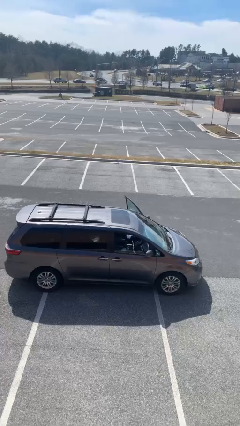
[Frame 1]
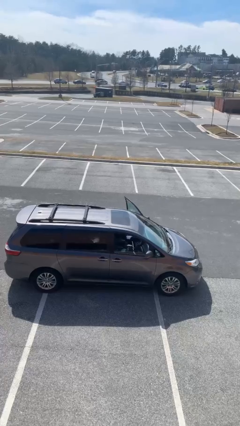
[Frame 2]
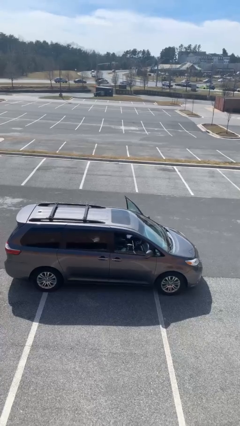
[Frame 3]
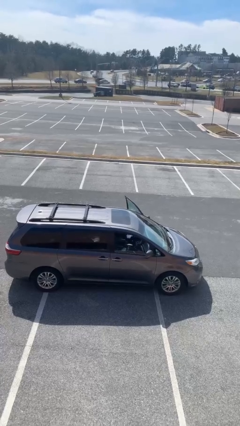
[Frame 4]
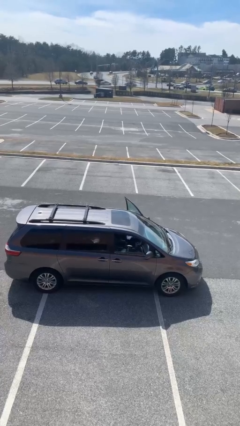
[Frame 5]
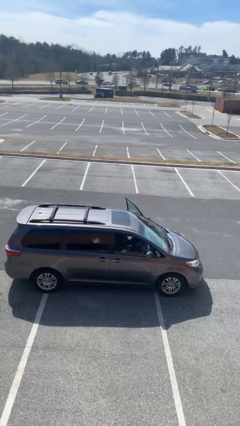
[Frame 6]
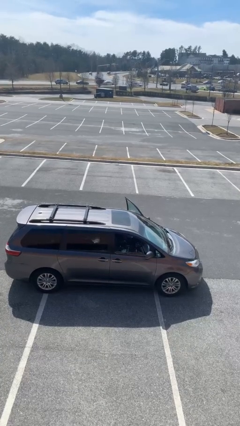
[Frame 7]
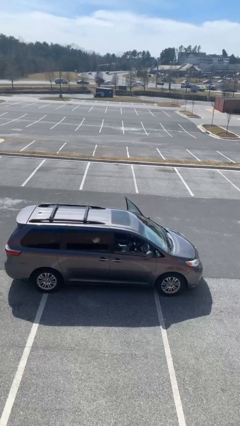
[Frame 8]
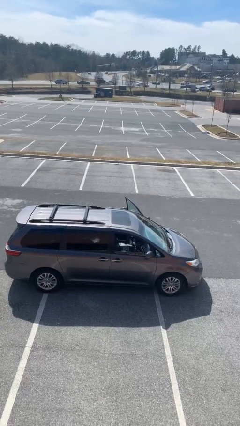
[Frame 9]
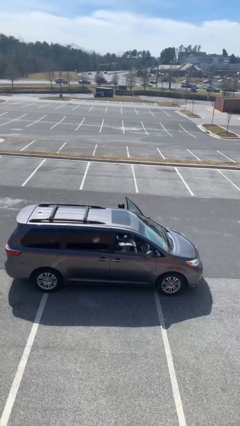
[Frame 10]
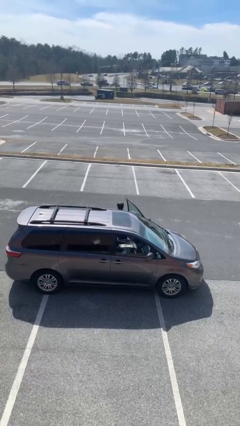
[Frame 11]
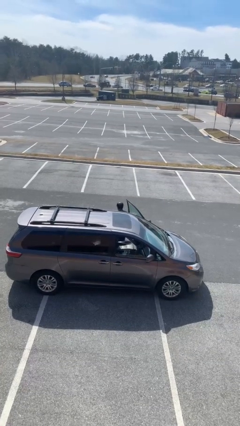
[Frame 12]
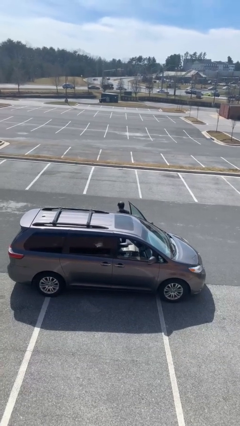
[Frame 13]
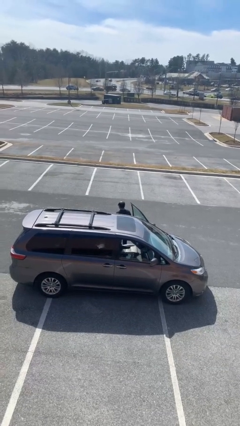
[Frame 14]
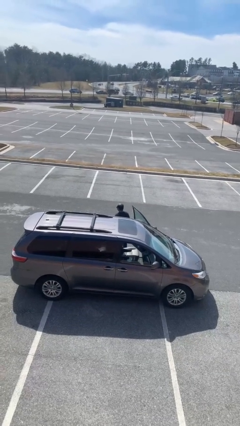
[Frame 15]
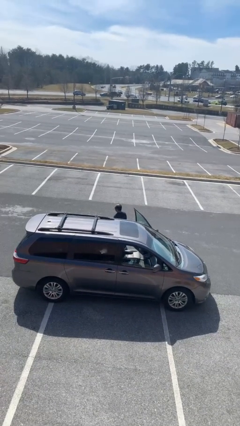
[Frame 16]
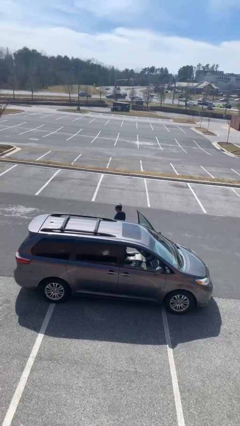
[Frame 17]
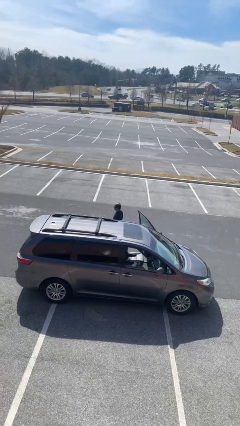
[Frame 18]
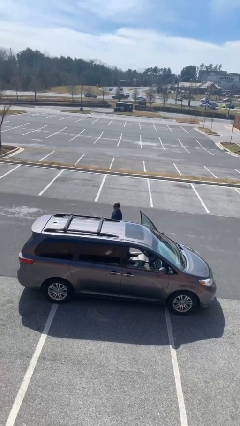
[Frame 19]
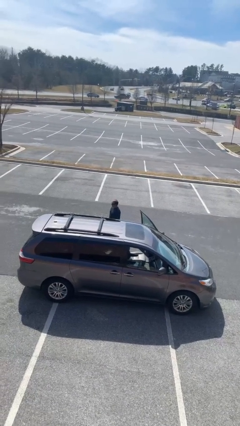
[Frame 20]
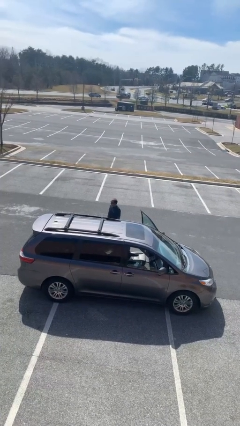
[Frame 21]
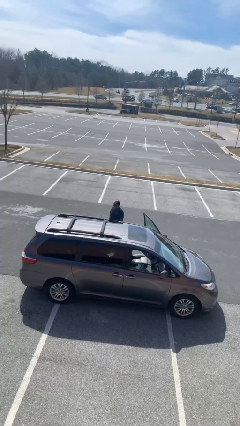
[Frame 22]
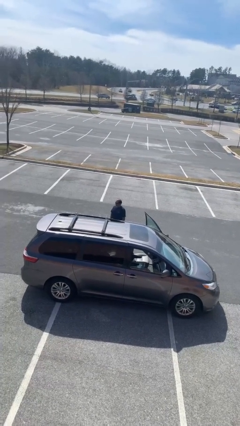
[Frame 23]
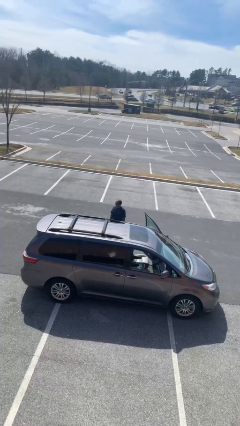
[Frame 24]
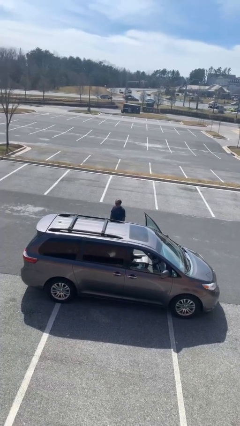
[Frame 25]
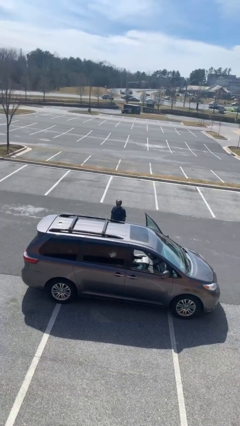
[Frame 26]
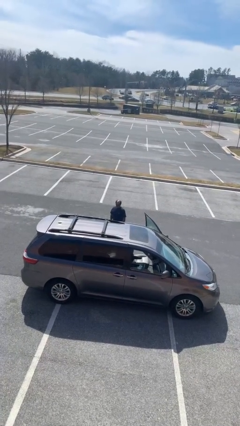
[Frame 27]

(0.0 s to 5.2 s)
person exits car

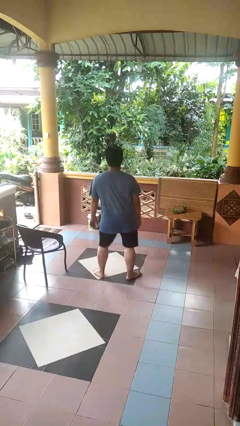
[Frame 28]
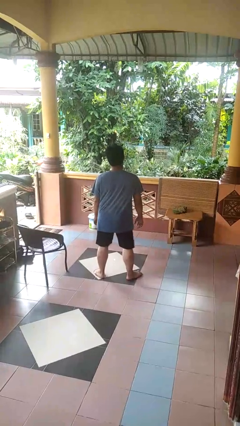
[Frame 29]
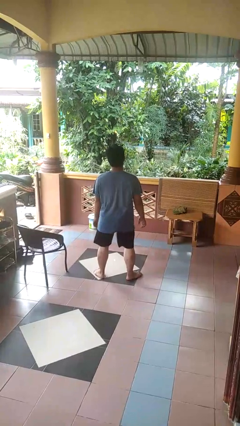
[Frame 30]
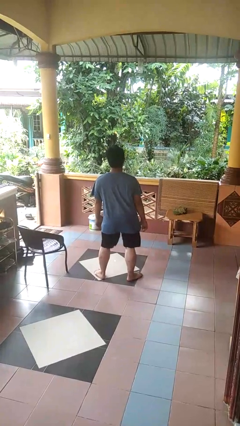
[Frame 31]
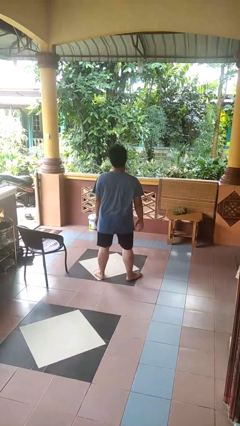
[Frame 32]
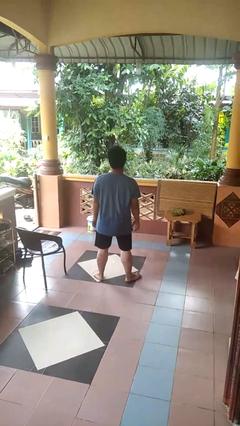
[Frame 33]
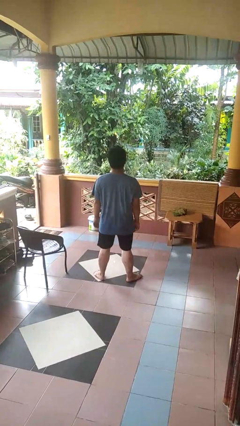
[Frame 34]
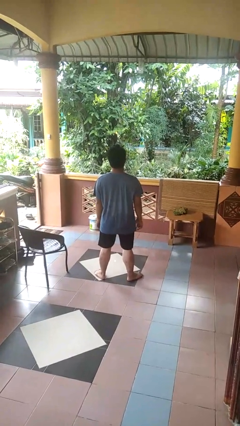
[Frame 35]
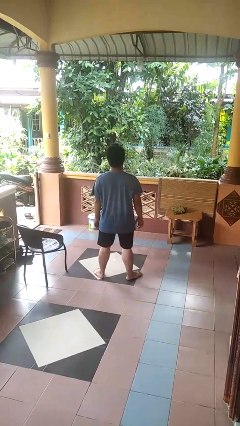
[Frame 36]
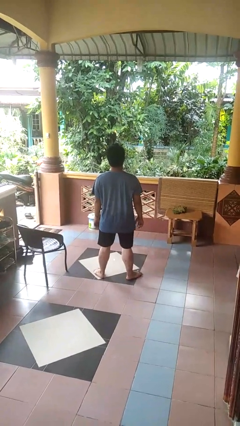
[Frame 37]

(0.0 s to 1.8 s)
person wiggles hips

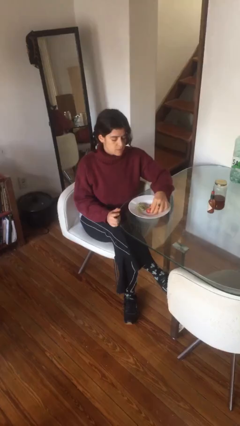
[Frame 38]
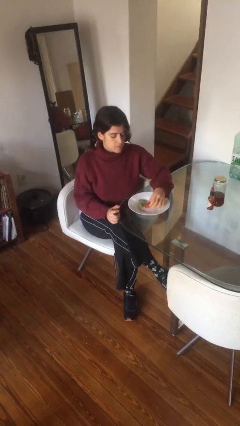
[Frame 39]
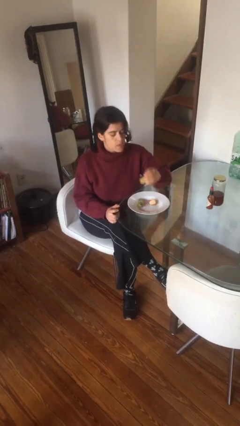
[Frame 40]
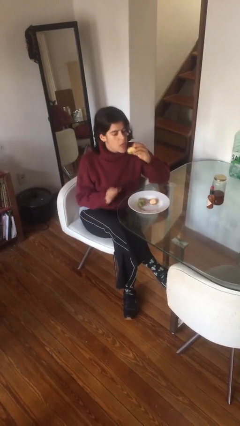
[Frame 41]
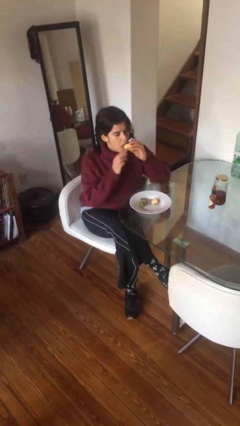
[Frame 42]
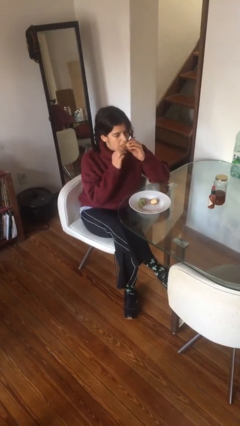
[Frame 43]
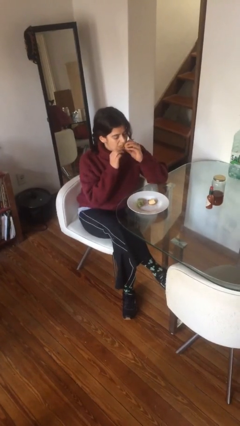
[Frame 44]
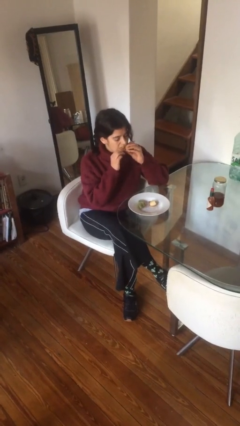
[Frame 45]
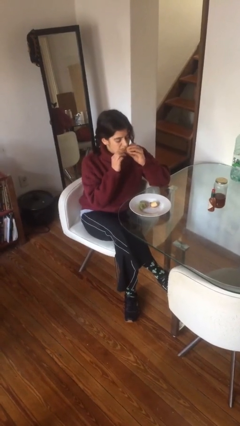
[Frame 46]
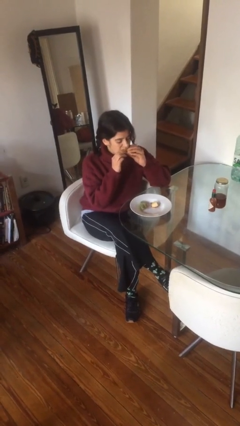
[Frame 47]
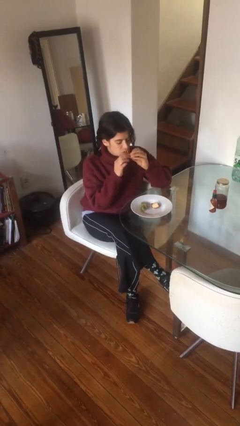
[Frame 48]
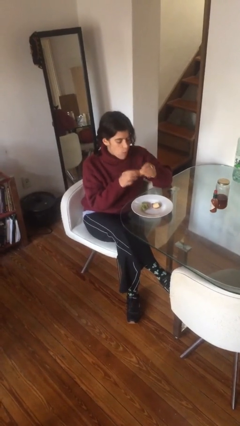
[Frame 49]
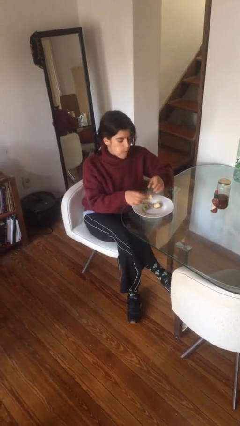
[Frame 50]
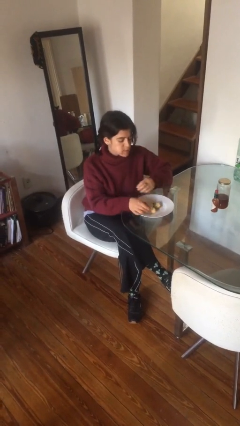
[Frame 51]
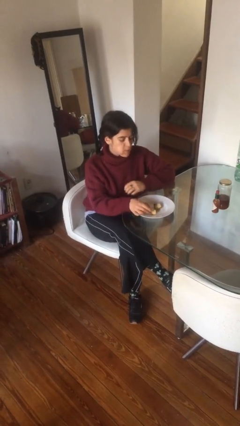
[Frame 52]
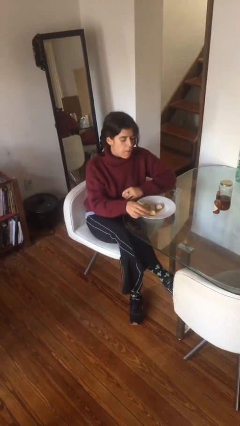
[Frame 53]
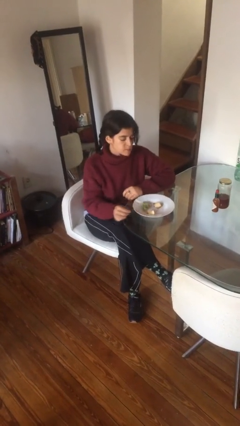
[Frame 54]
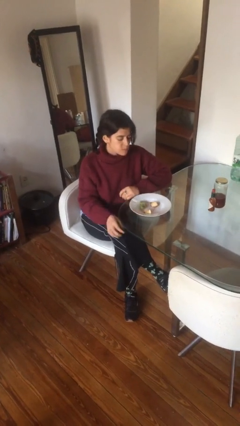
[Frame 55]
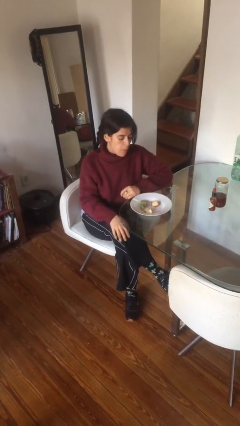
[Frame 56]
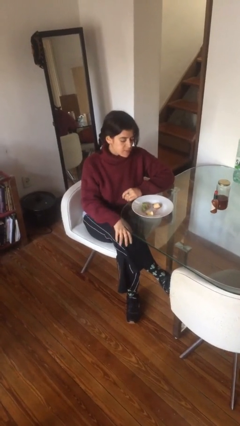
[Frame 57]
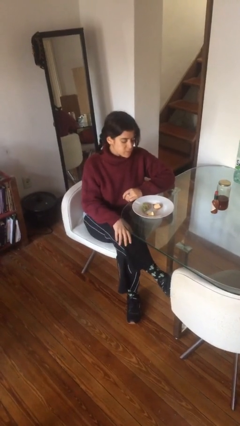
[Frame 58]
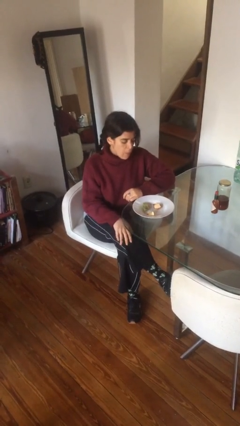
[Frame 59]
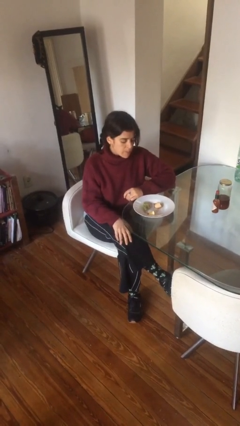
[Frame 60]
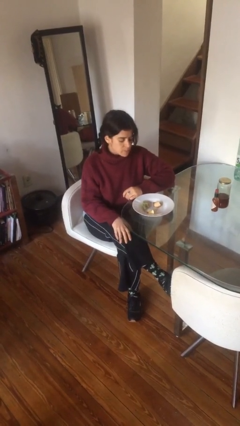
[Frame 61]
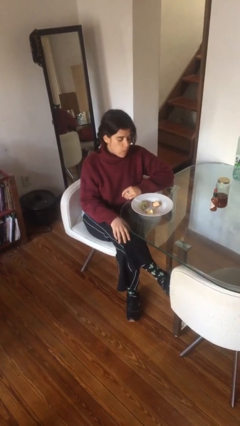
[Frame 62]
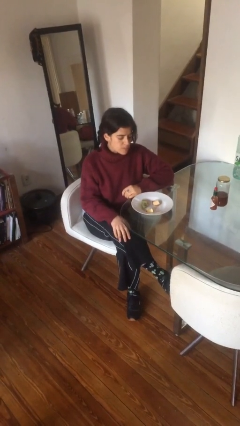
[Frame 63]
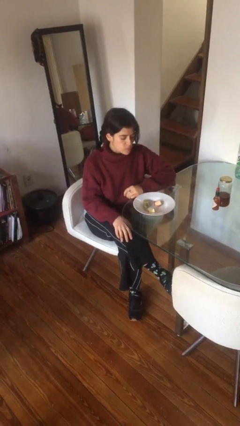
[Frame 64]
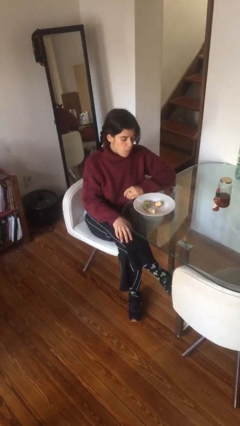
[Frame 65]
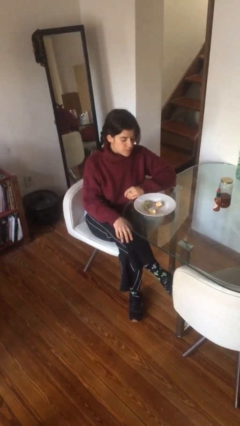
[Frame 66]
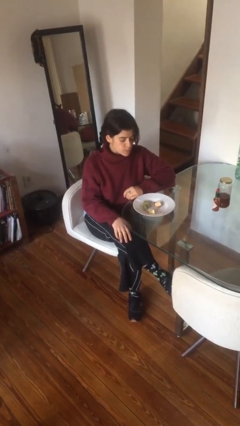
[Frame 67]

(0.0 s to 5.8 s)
person eats with hands

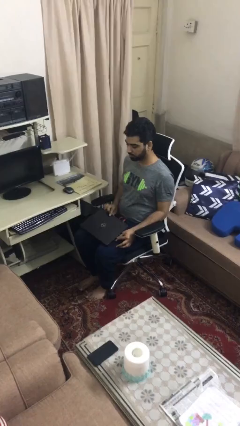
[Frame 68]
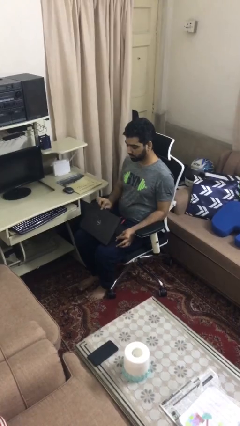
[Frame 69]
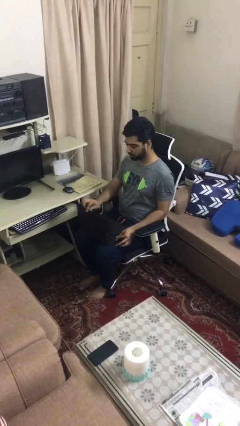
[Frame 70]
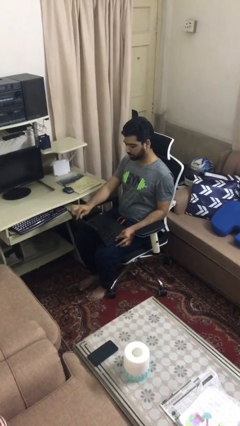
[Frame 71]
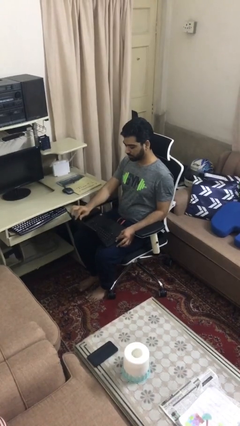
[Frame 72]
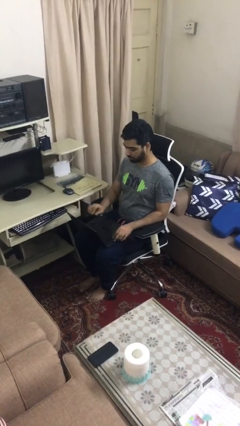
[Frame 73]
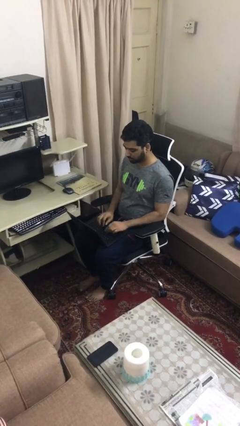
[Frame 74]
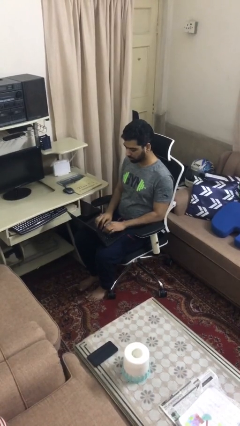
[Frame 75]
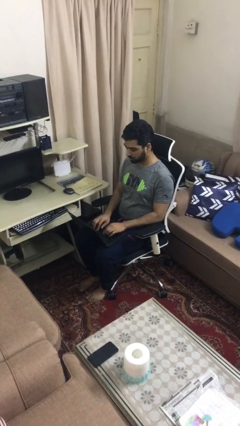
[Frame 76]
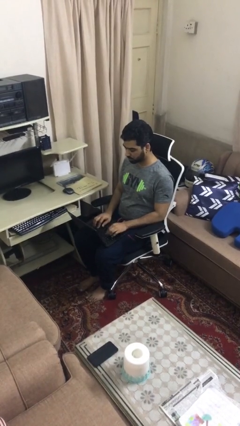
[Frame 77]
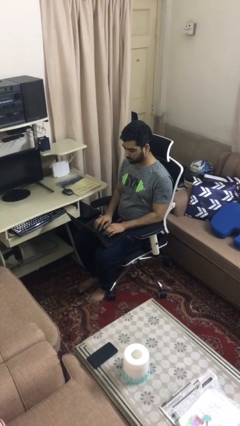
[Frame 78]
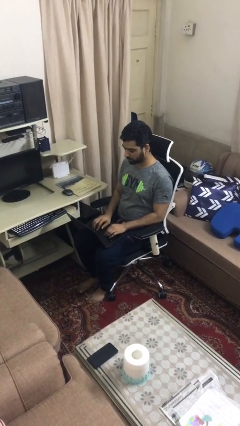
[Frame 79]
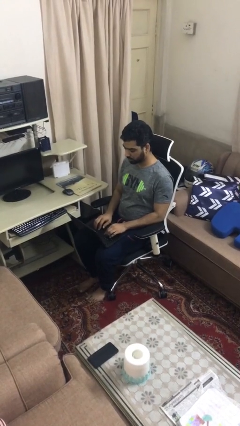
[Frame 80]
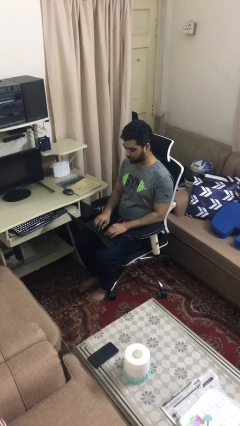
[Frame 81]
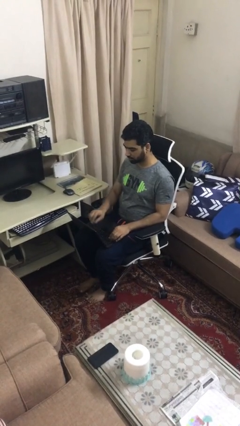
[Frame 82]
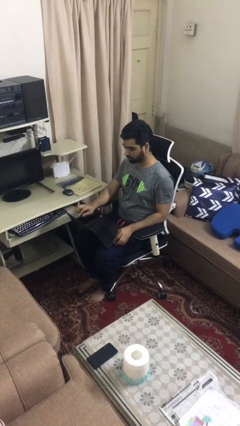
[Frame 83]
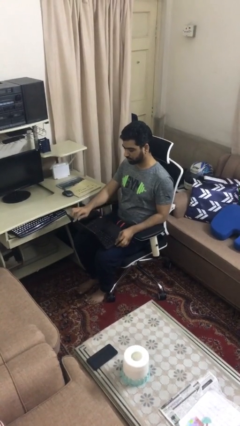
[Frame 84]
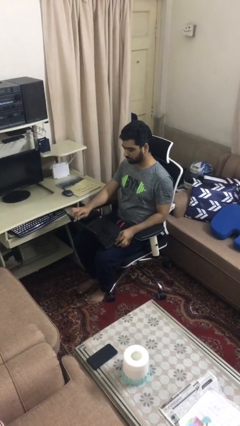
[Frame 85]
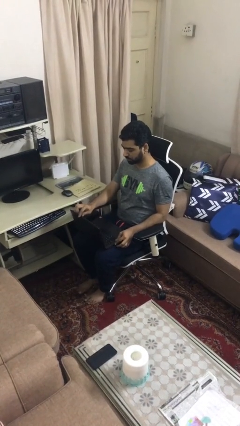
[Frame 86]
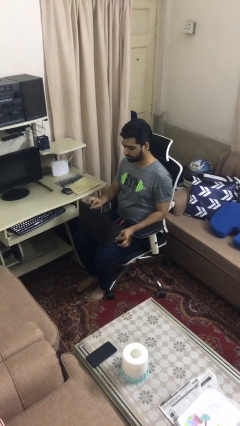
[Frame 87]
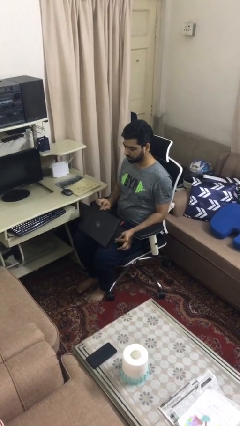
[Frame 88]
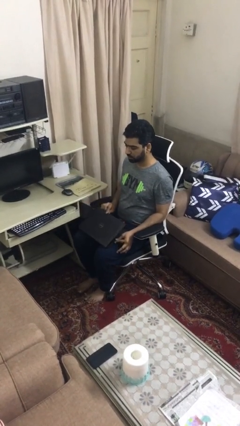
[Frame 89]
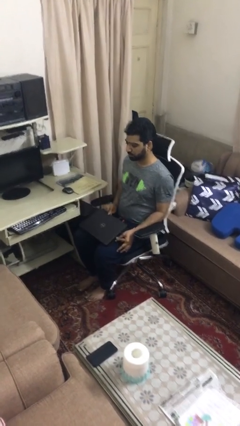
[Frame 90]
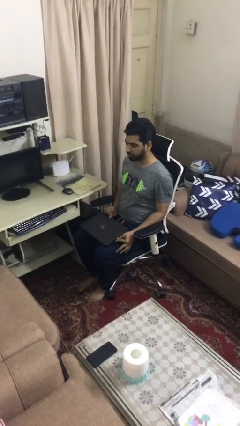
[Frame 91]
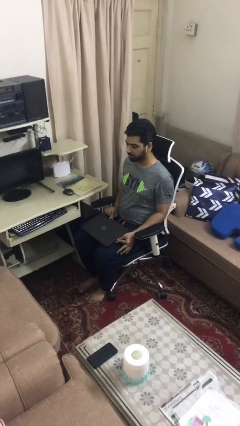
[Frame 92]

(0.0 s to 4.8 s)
person interacts with laptop

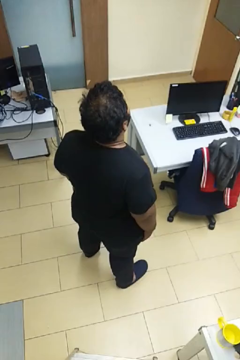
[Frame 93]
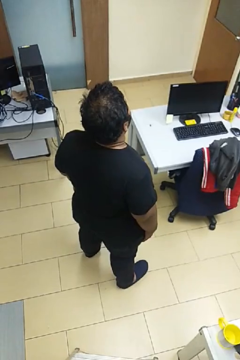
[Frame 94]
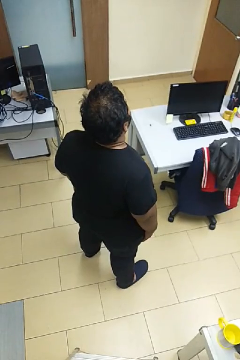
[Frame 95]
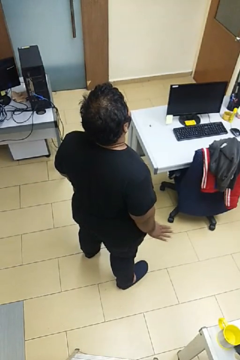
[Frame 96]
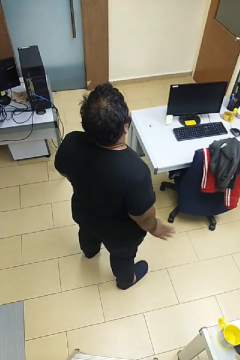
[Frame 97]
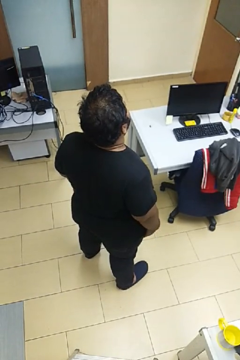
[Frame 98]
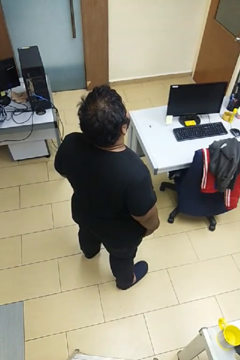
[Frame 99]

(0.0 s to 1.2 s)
person slaps hands on thighs
